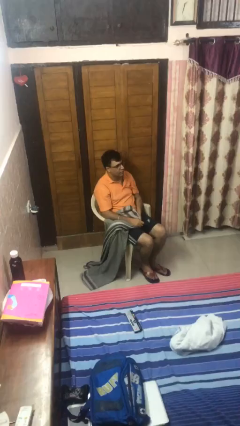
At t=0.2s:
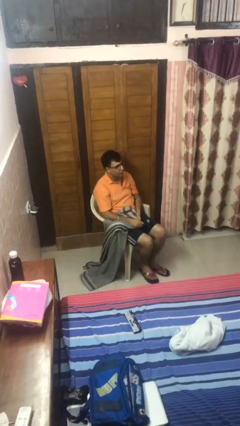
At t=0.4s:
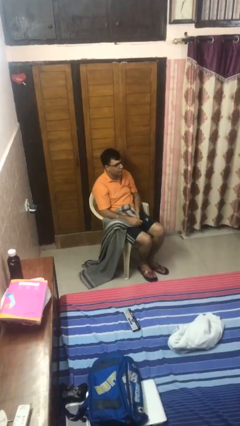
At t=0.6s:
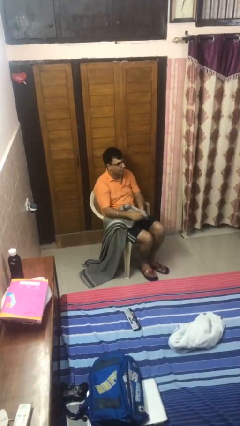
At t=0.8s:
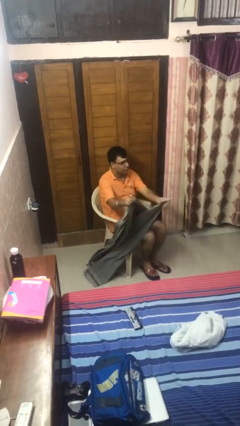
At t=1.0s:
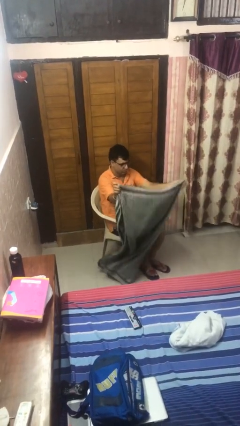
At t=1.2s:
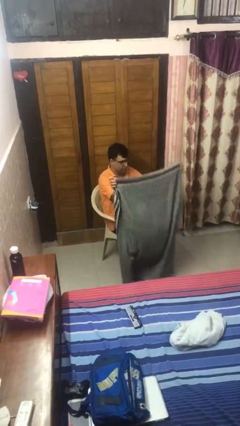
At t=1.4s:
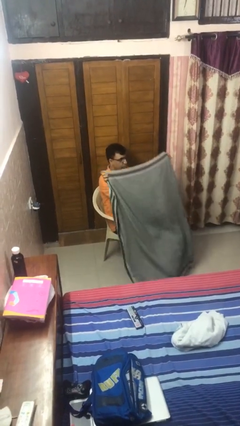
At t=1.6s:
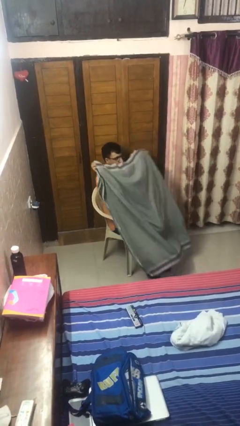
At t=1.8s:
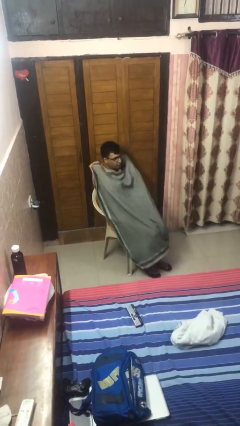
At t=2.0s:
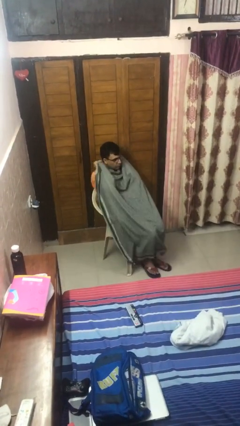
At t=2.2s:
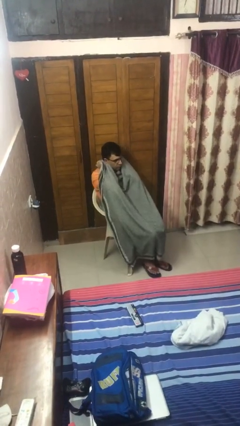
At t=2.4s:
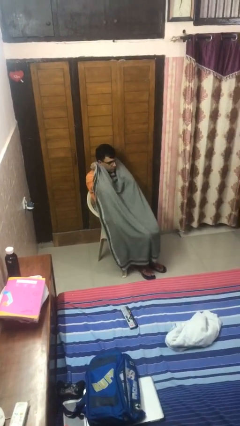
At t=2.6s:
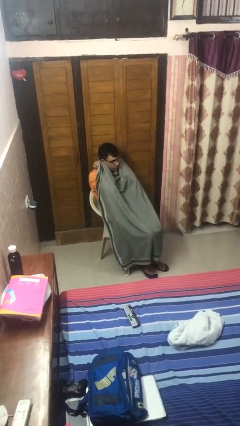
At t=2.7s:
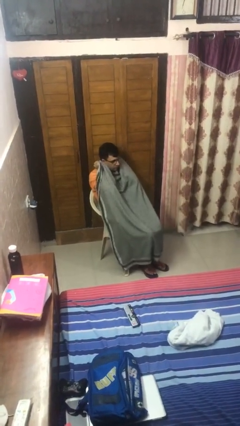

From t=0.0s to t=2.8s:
person covers with blanket

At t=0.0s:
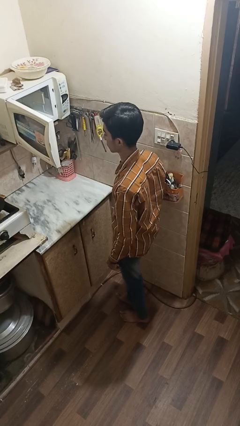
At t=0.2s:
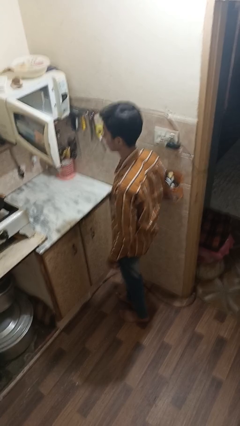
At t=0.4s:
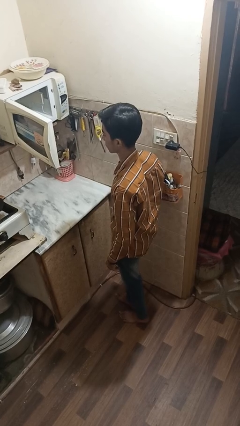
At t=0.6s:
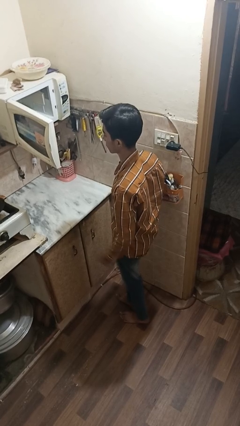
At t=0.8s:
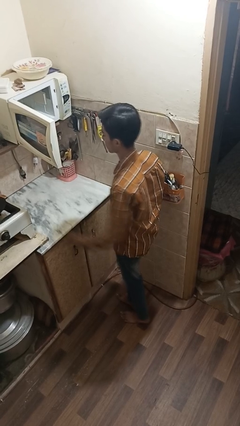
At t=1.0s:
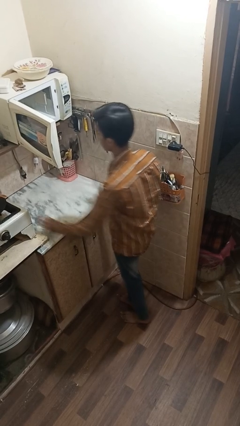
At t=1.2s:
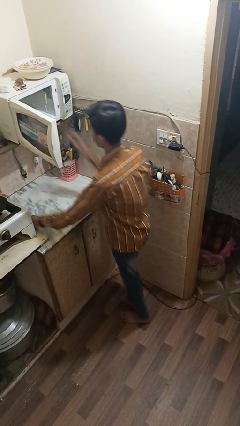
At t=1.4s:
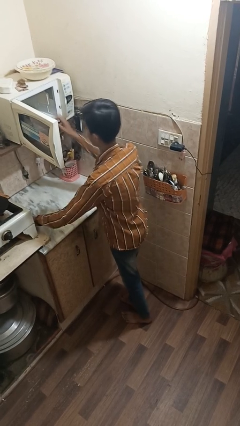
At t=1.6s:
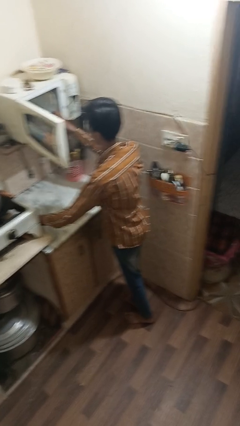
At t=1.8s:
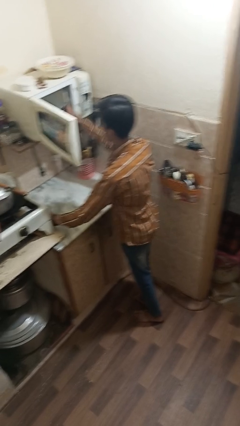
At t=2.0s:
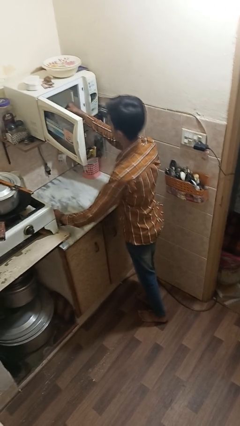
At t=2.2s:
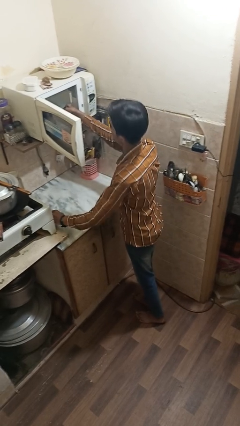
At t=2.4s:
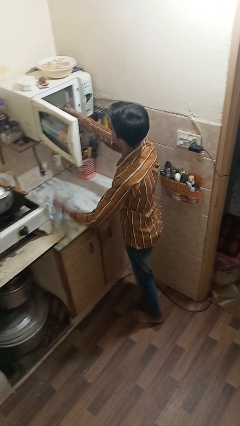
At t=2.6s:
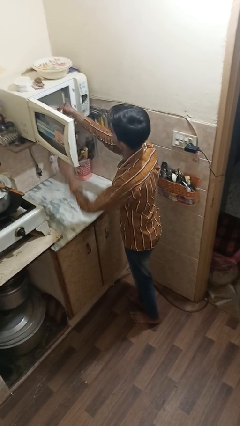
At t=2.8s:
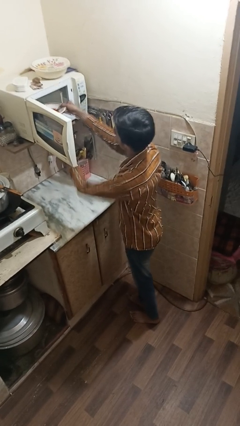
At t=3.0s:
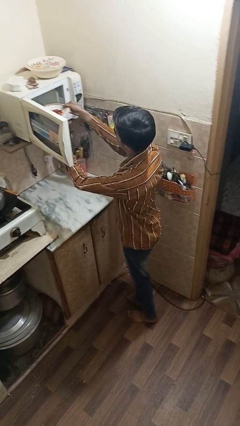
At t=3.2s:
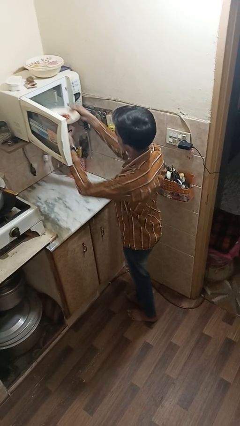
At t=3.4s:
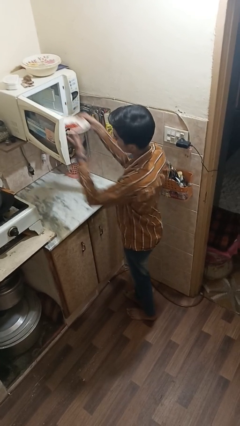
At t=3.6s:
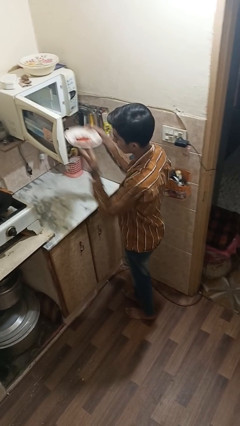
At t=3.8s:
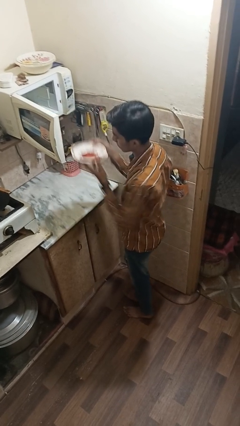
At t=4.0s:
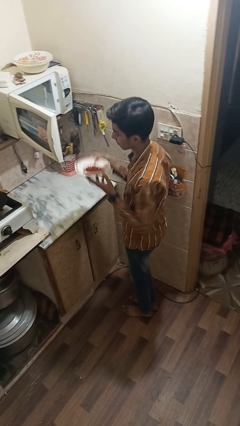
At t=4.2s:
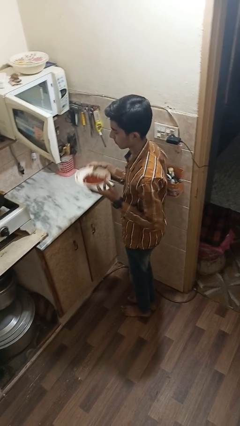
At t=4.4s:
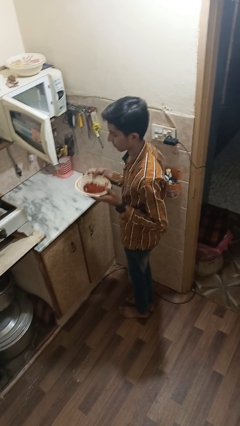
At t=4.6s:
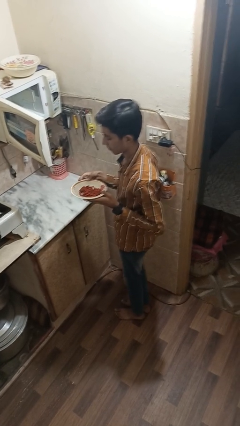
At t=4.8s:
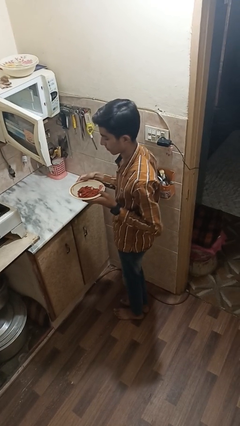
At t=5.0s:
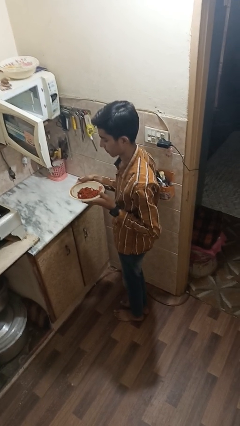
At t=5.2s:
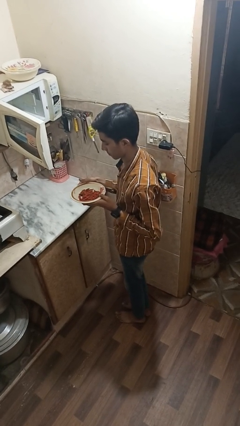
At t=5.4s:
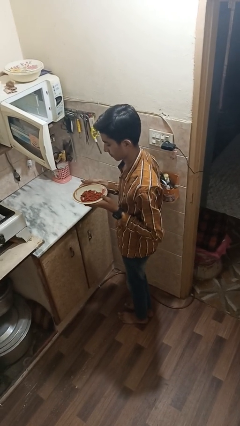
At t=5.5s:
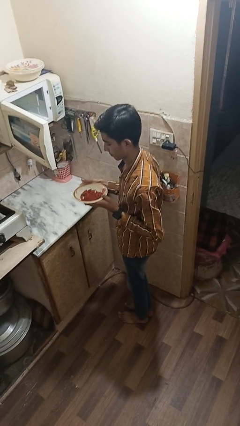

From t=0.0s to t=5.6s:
person takes object from microwave

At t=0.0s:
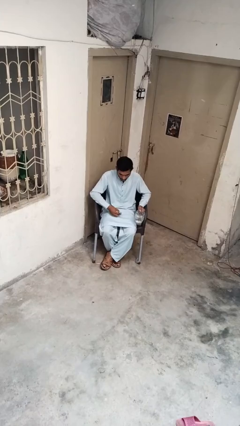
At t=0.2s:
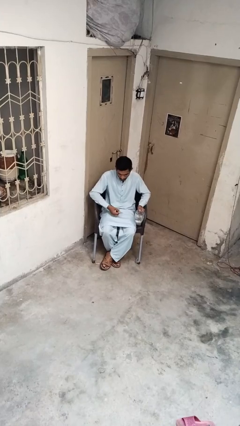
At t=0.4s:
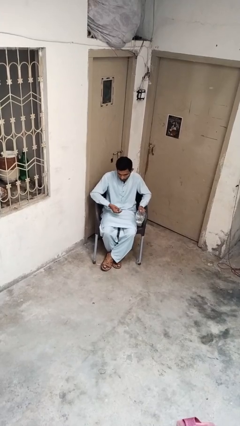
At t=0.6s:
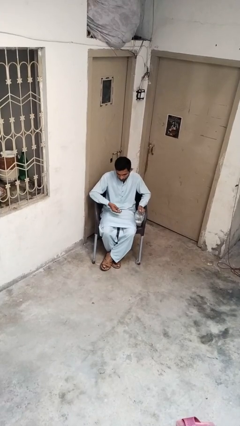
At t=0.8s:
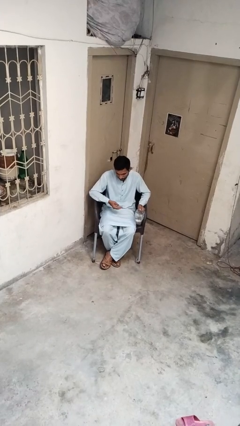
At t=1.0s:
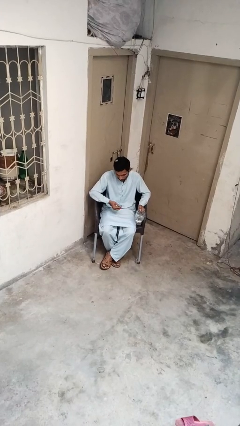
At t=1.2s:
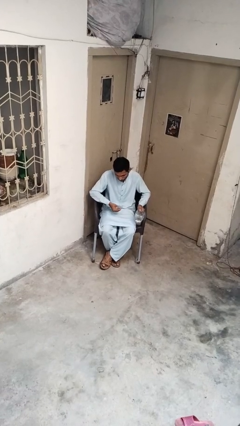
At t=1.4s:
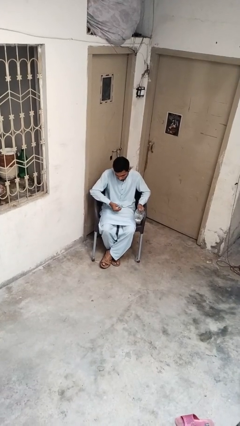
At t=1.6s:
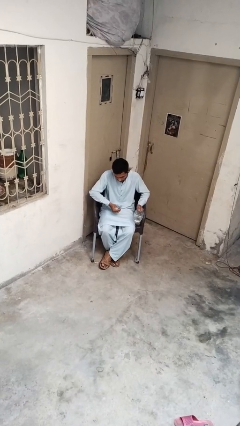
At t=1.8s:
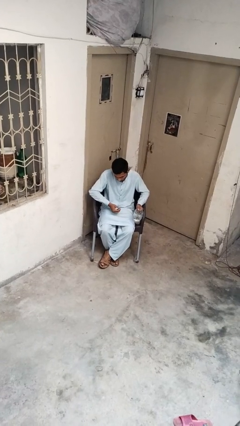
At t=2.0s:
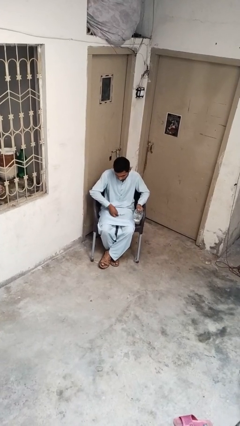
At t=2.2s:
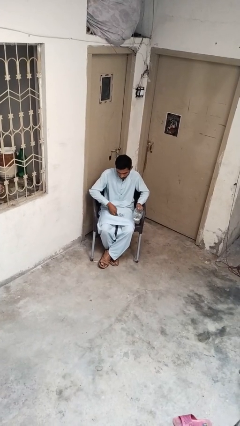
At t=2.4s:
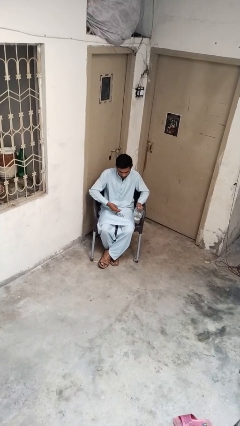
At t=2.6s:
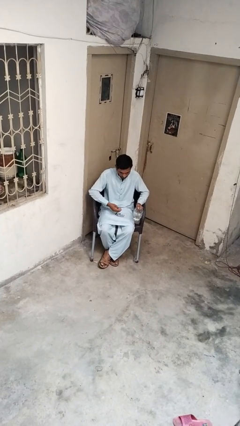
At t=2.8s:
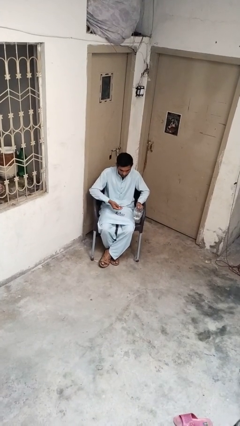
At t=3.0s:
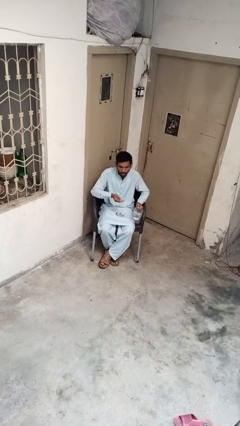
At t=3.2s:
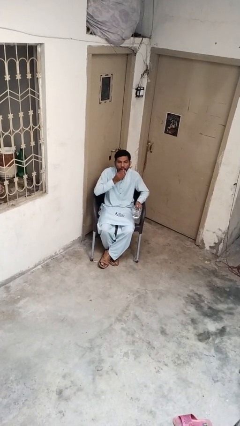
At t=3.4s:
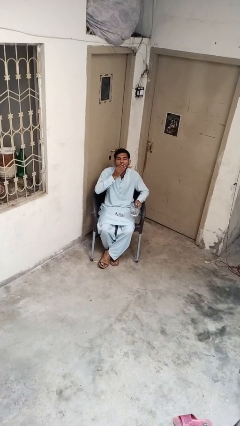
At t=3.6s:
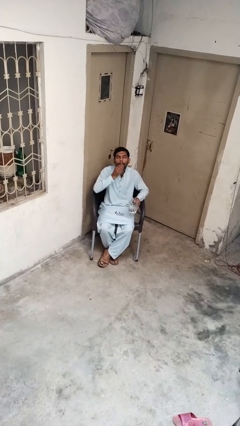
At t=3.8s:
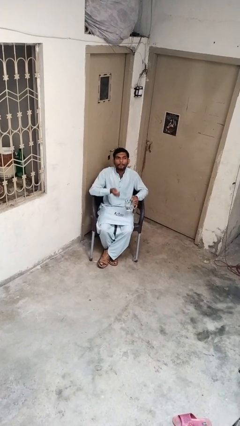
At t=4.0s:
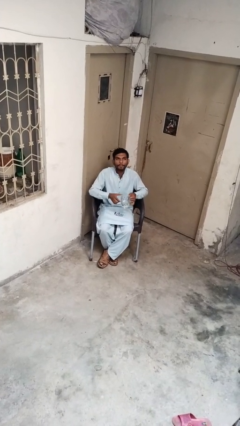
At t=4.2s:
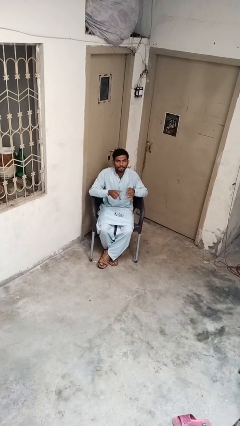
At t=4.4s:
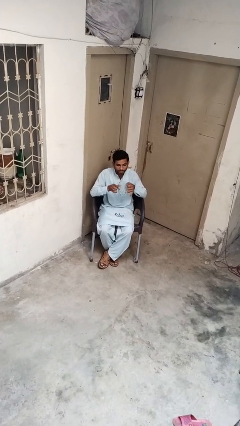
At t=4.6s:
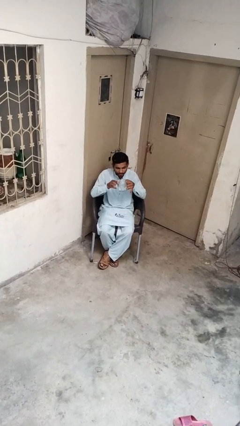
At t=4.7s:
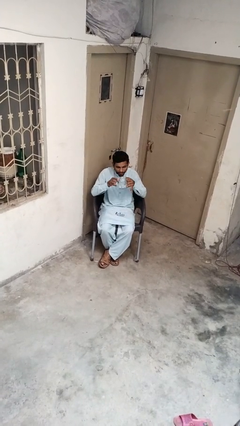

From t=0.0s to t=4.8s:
person takes medicine pills

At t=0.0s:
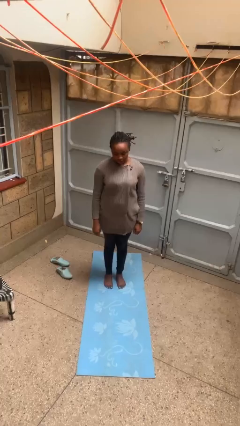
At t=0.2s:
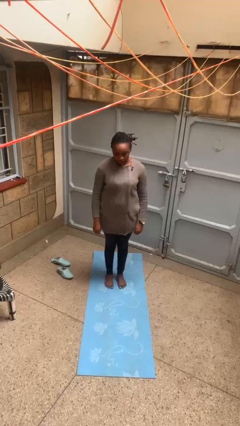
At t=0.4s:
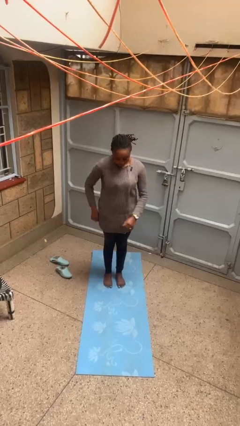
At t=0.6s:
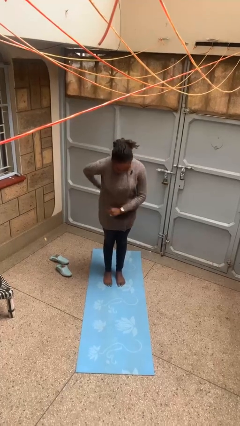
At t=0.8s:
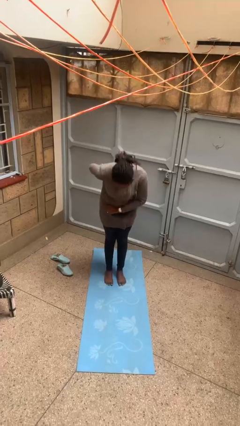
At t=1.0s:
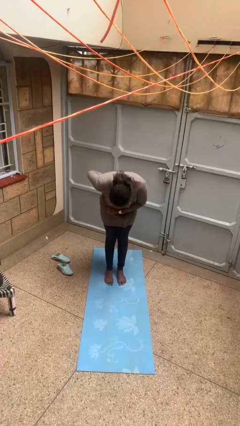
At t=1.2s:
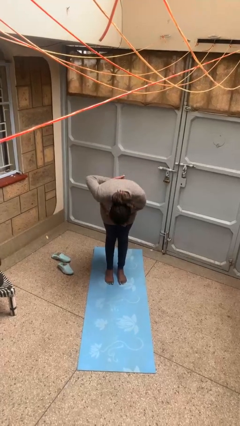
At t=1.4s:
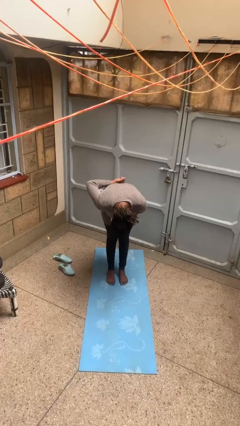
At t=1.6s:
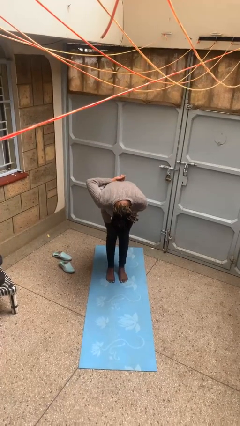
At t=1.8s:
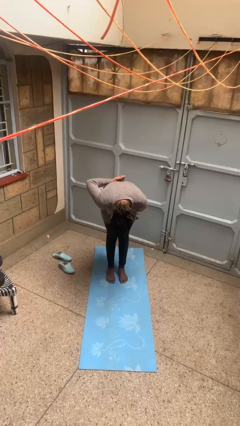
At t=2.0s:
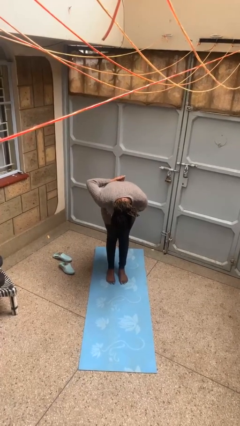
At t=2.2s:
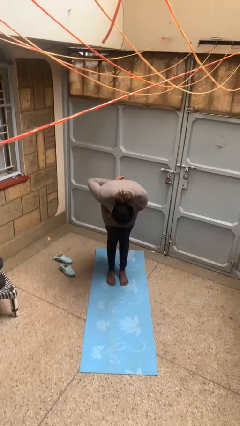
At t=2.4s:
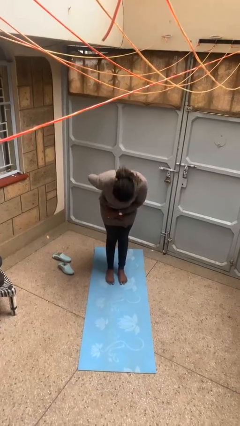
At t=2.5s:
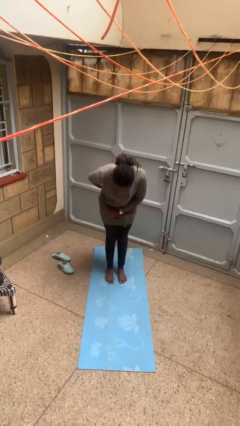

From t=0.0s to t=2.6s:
person bows

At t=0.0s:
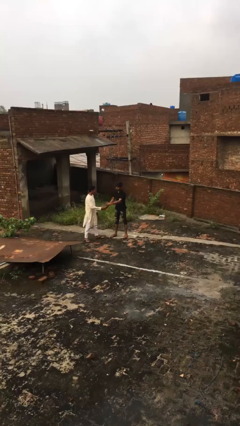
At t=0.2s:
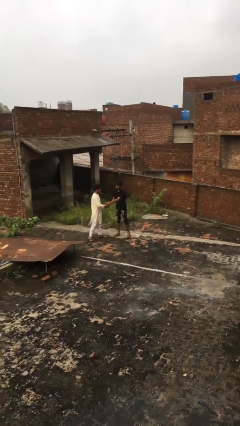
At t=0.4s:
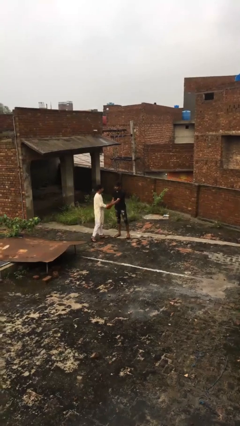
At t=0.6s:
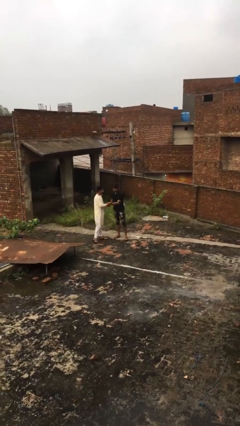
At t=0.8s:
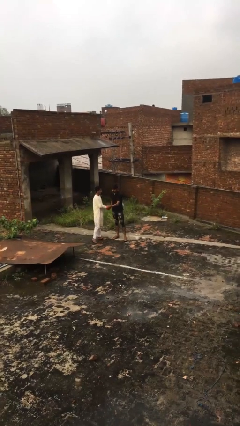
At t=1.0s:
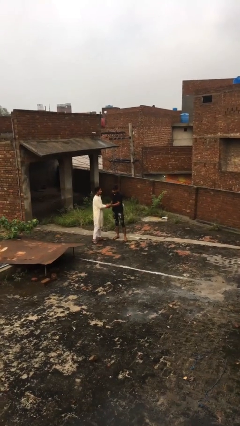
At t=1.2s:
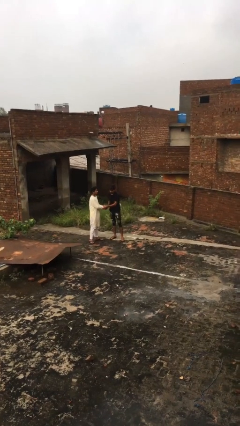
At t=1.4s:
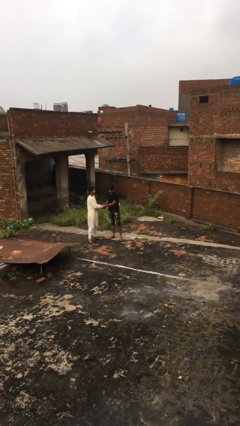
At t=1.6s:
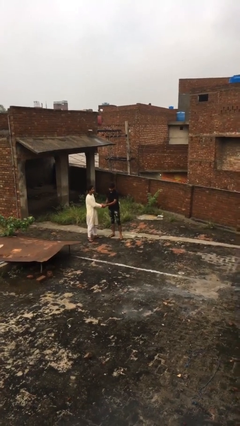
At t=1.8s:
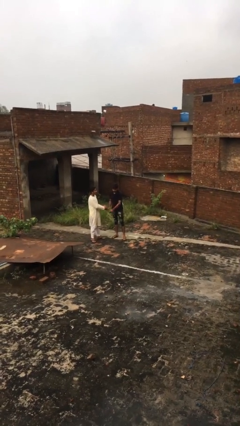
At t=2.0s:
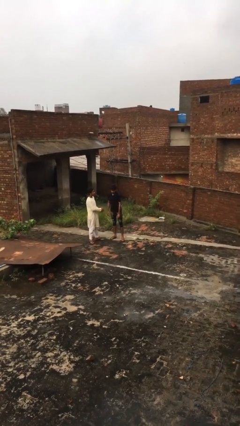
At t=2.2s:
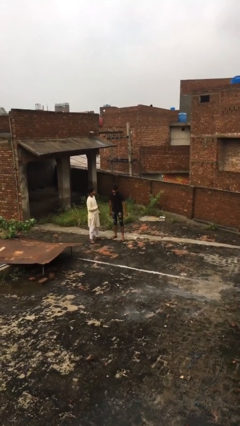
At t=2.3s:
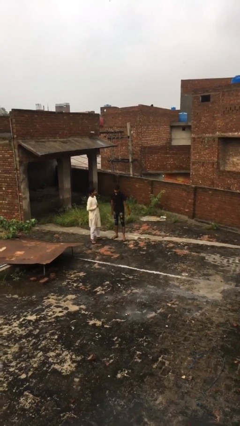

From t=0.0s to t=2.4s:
person shakes hand
